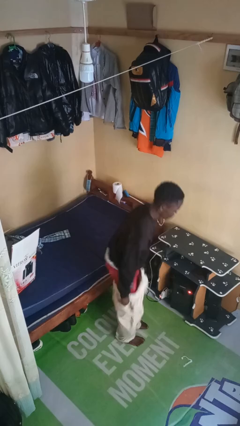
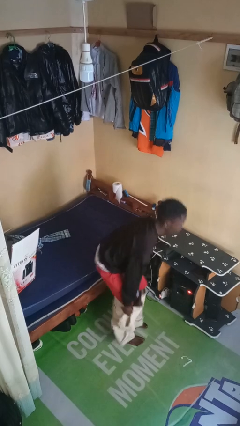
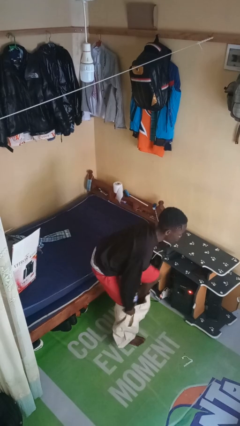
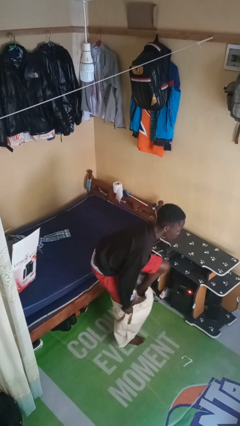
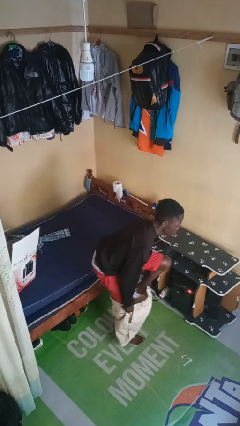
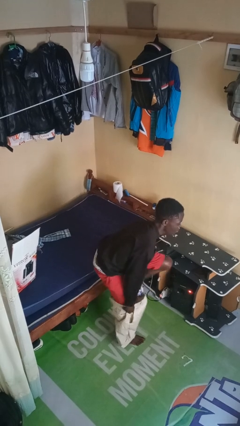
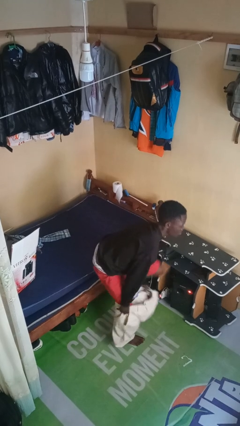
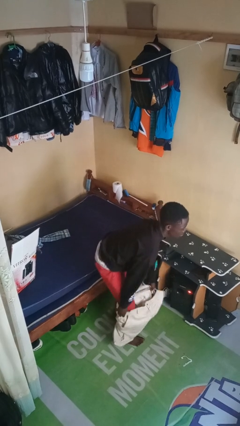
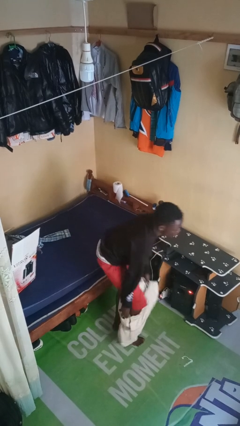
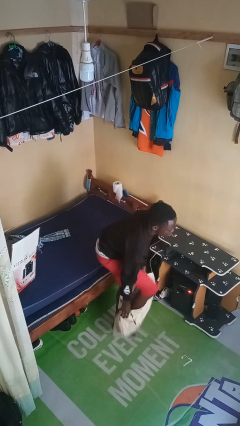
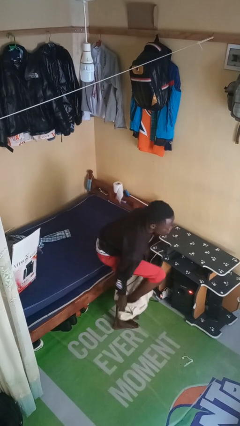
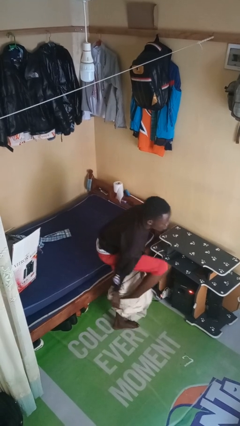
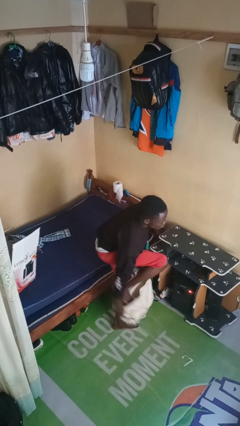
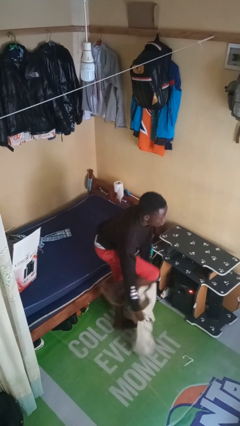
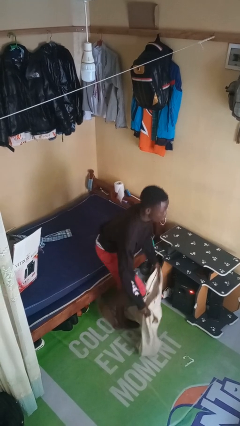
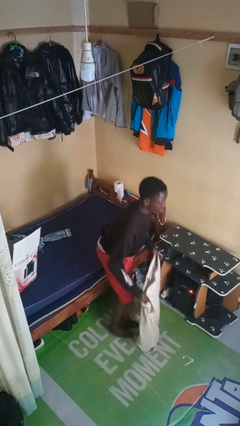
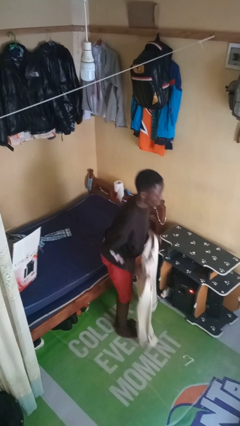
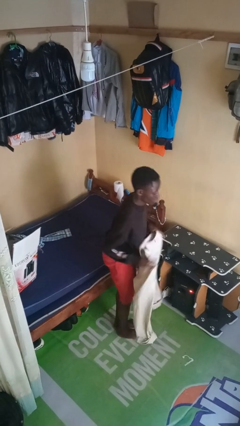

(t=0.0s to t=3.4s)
person takes off pants

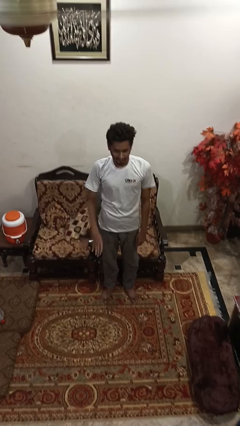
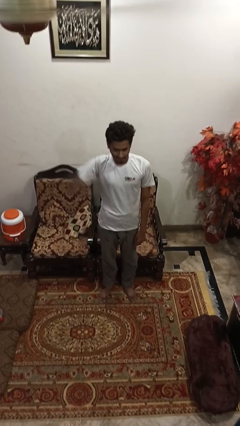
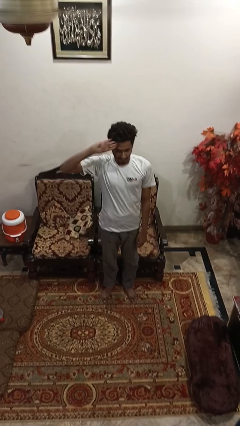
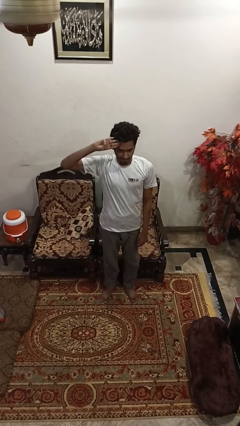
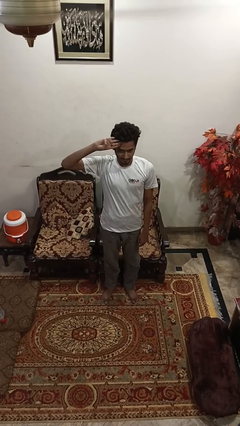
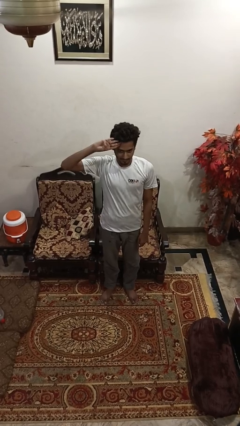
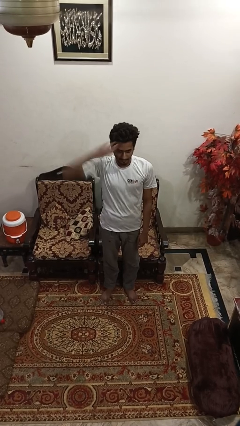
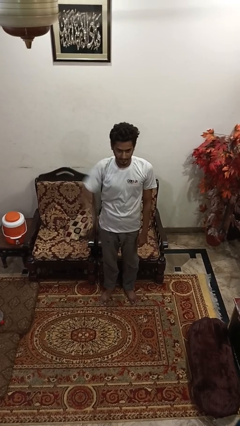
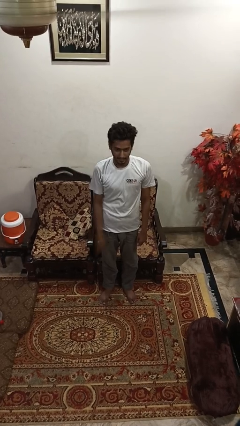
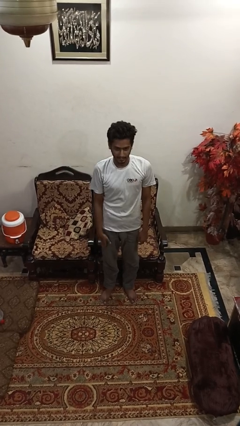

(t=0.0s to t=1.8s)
person salutes

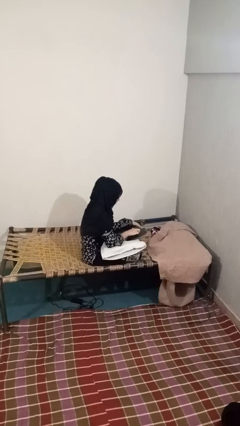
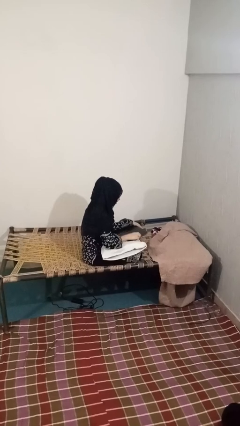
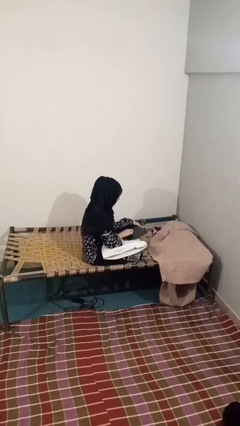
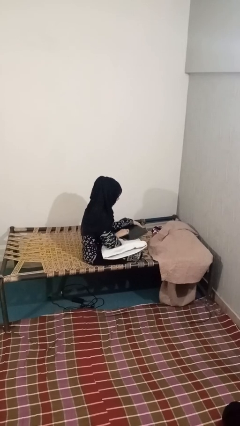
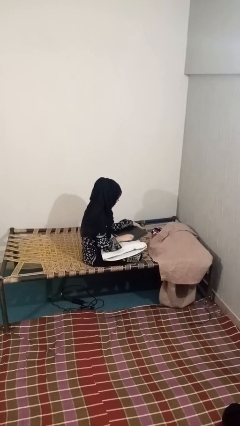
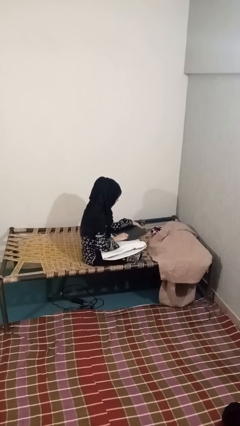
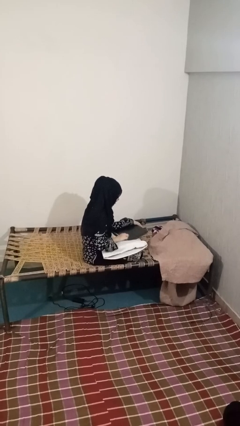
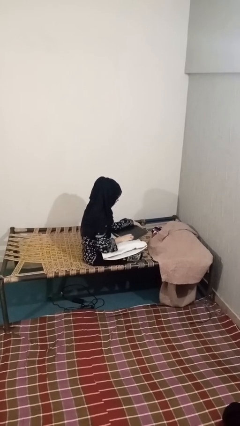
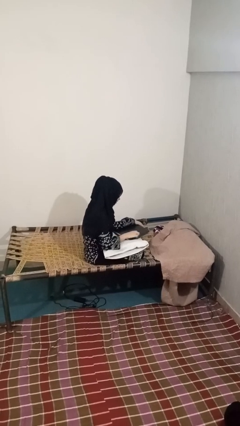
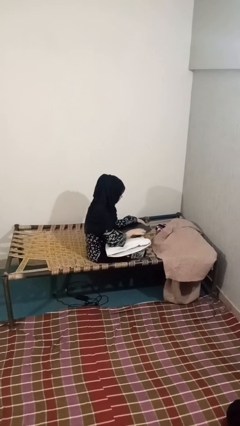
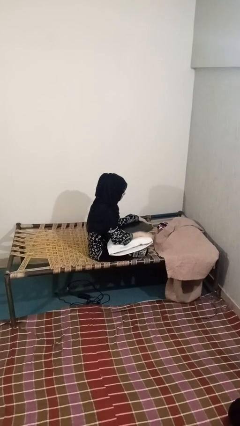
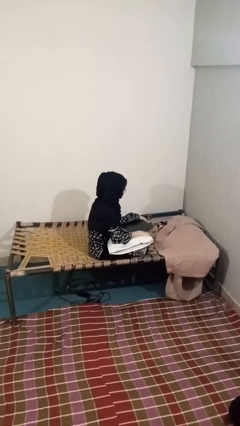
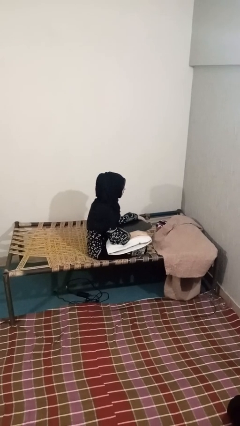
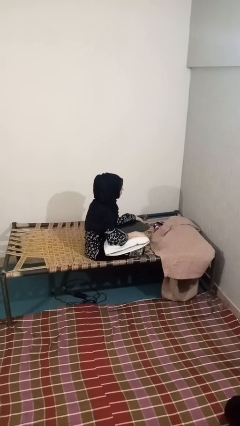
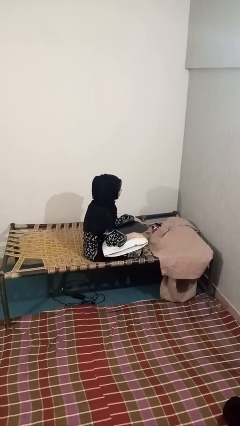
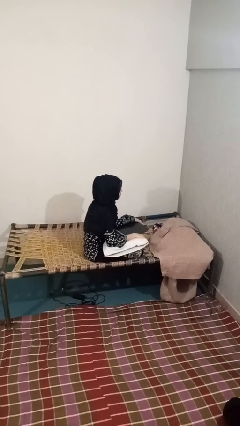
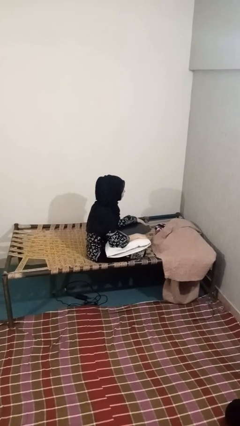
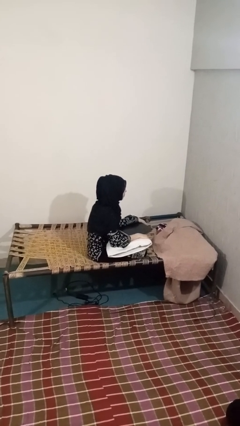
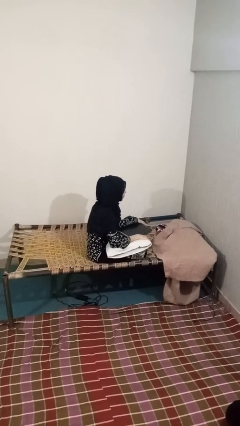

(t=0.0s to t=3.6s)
person interacts with tablet

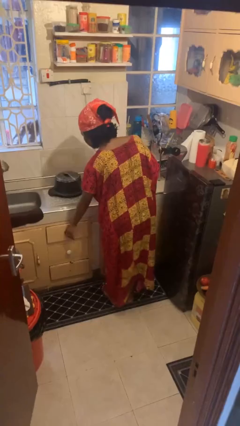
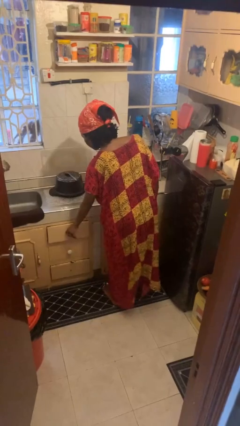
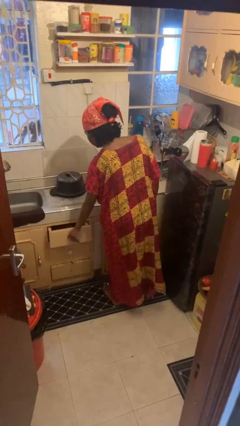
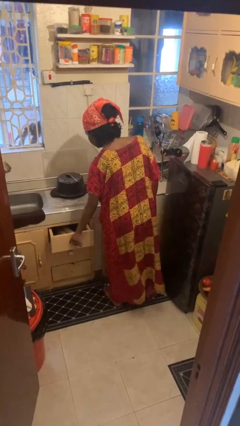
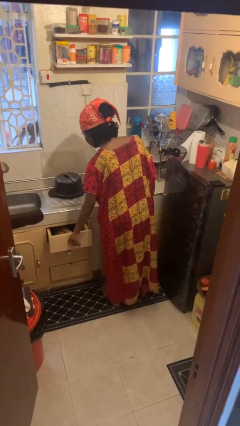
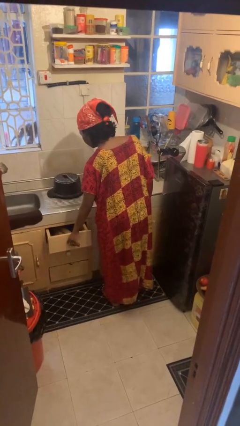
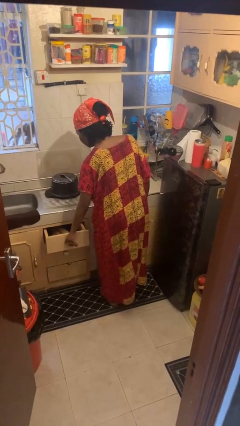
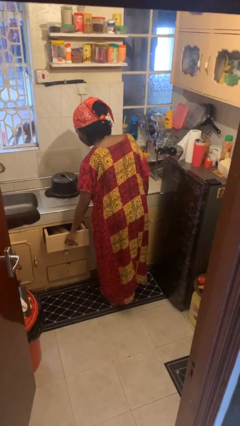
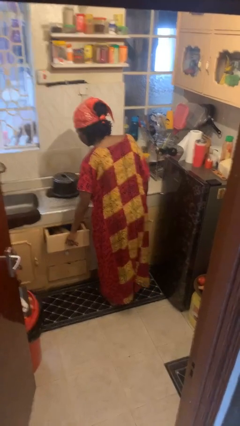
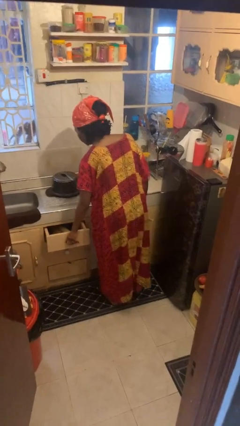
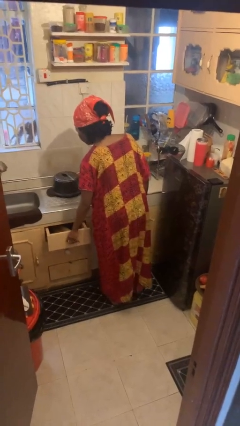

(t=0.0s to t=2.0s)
person opens kitchen drawer

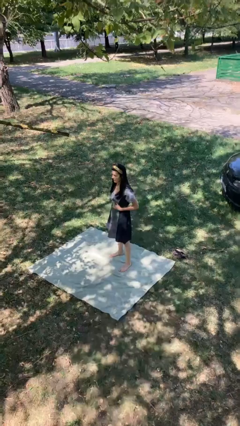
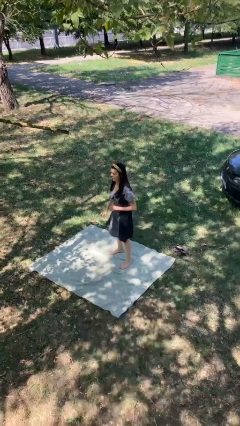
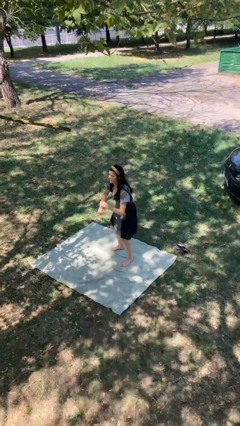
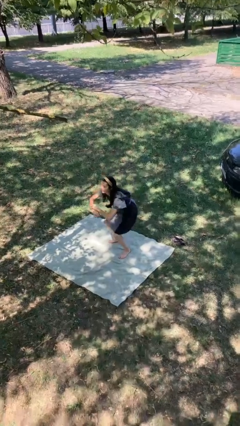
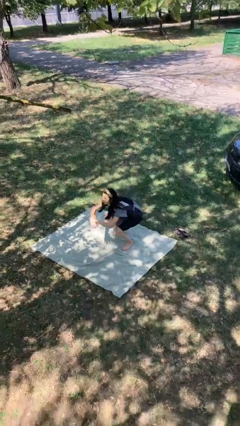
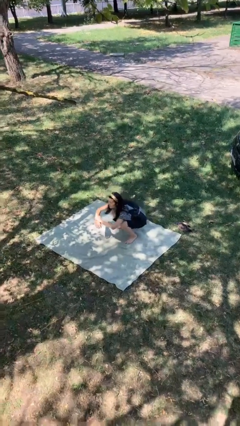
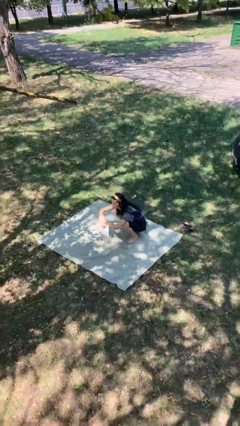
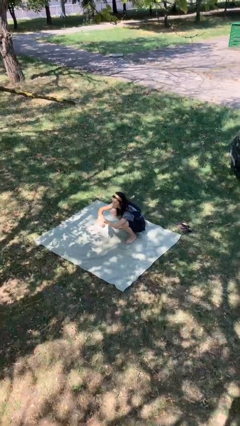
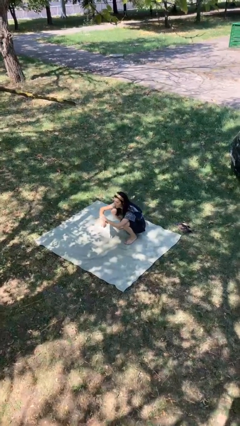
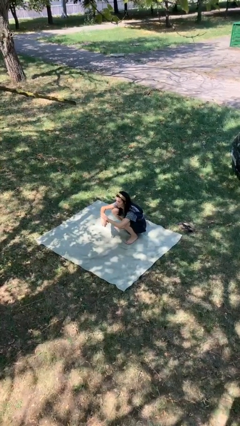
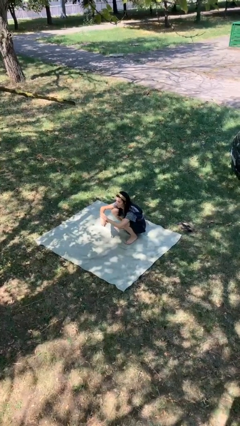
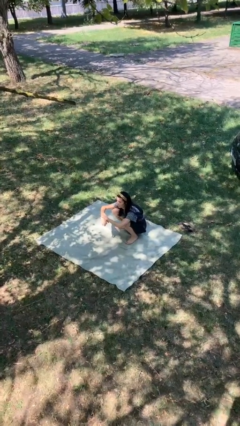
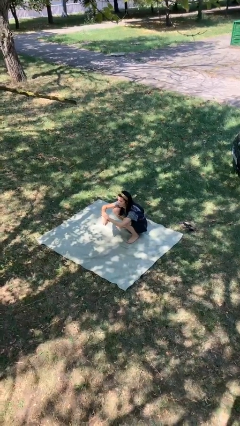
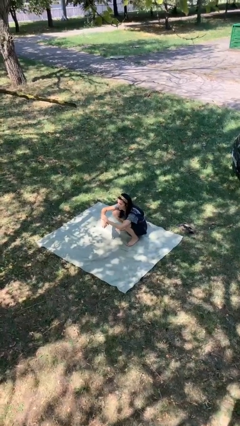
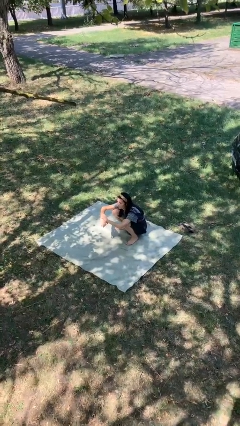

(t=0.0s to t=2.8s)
person squats

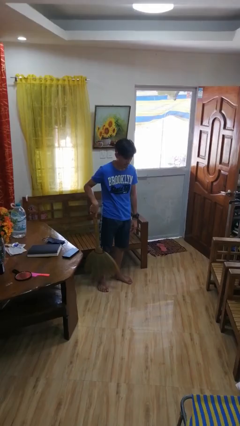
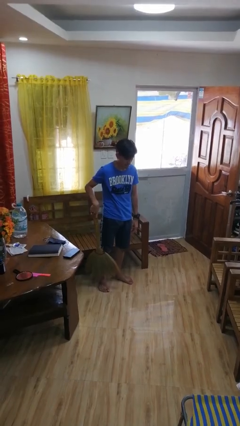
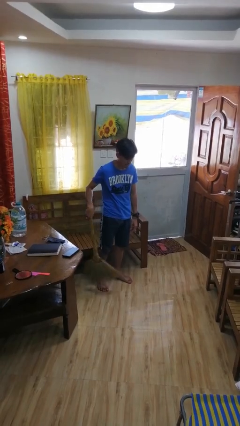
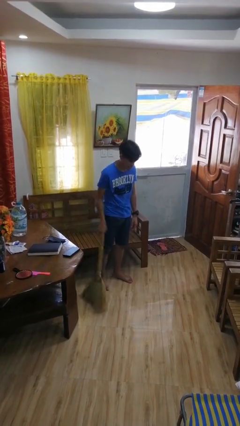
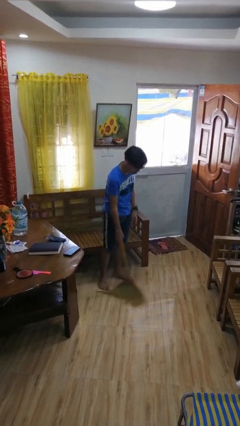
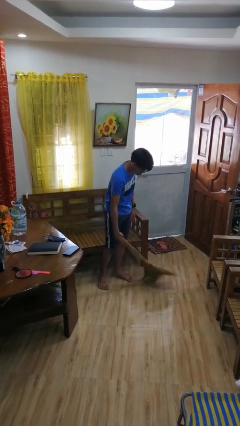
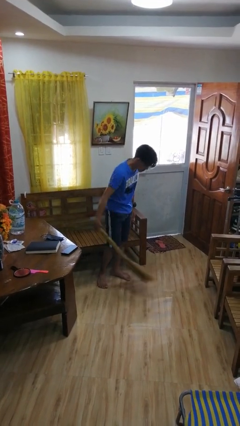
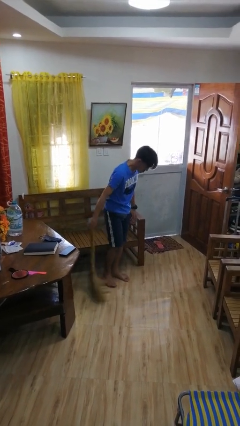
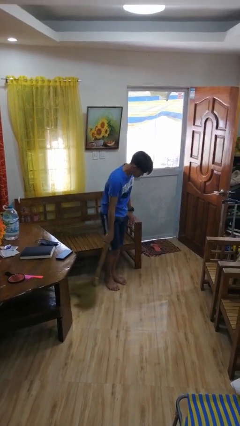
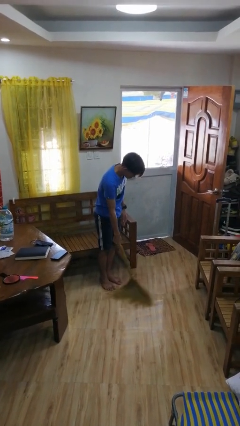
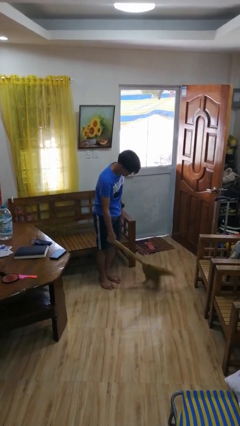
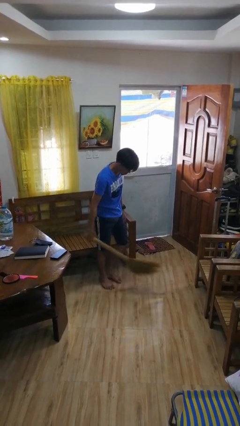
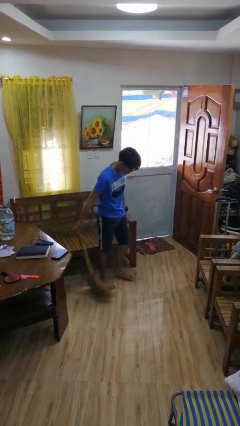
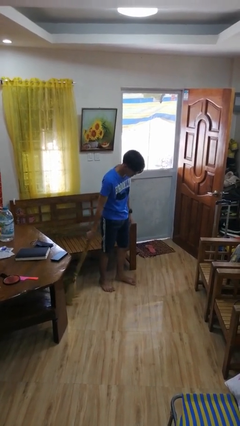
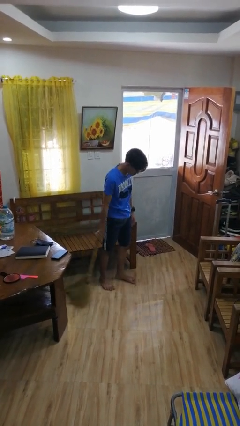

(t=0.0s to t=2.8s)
person sweeps floor

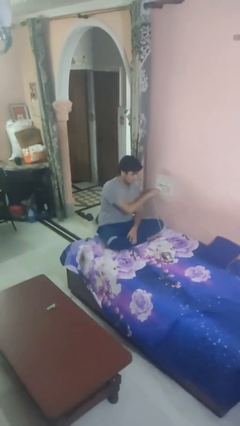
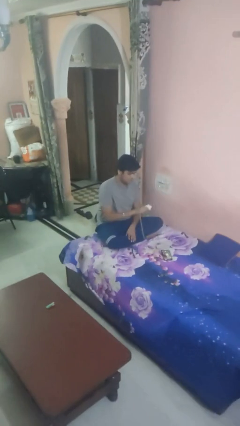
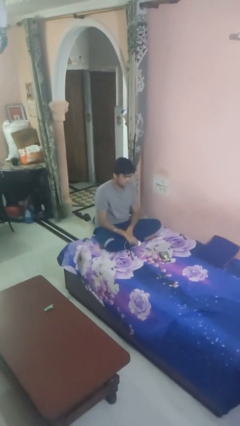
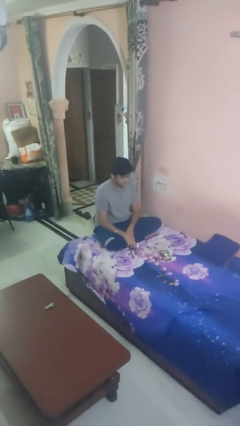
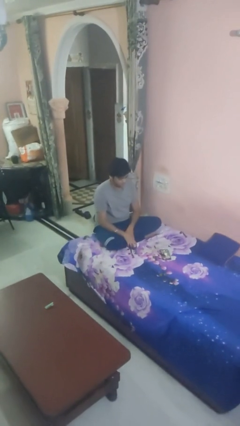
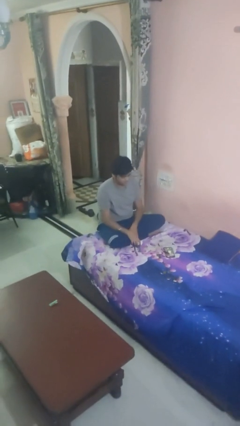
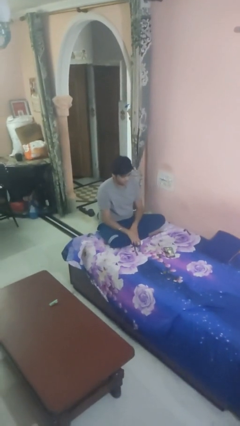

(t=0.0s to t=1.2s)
person unplugs from electrical socket
